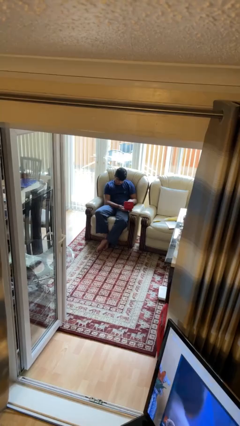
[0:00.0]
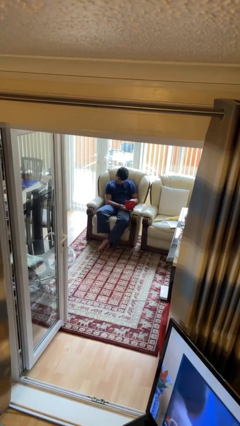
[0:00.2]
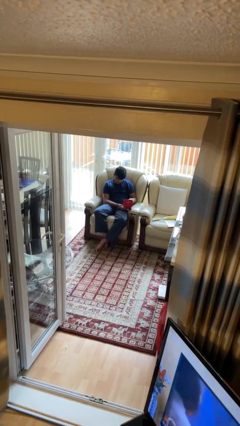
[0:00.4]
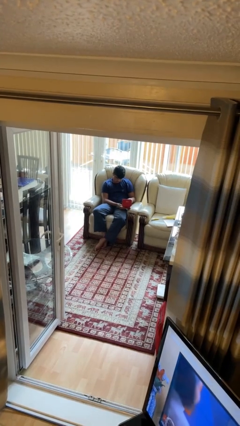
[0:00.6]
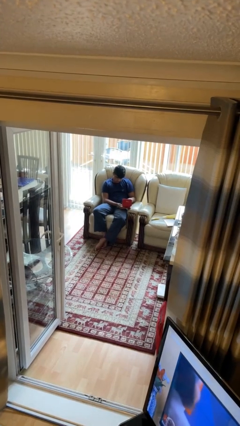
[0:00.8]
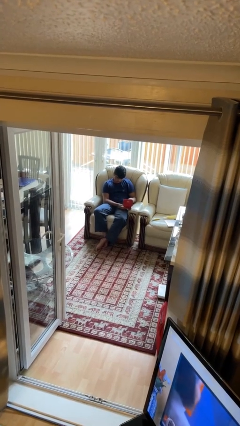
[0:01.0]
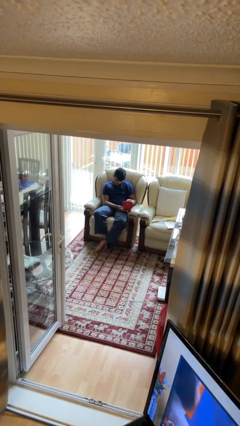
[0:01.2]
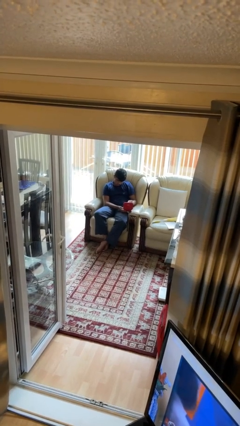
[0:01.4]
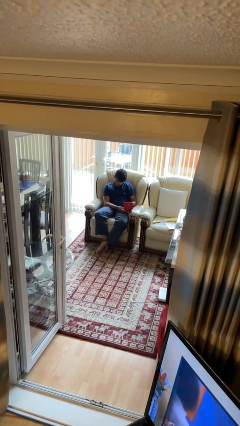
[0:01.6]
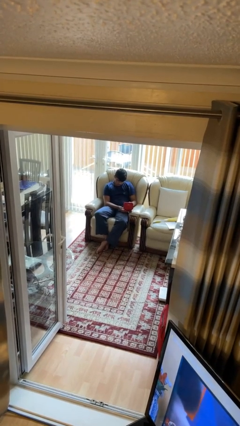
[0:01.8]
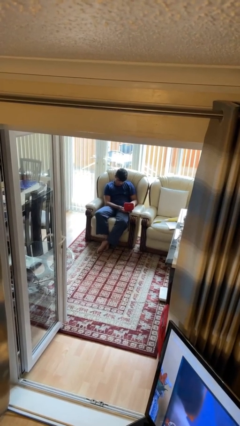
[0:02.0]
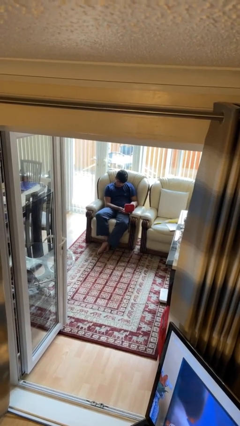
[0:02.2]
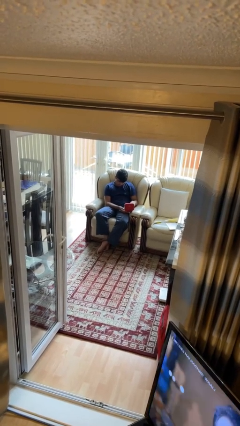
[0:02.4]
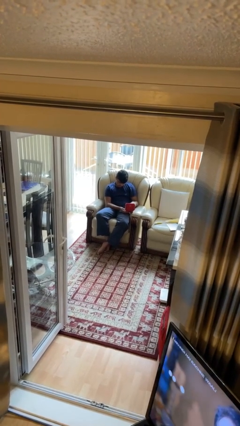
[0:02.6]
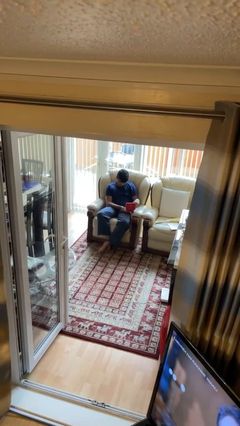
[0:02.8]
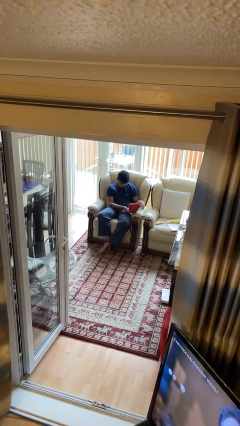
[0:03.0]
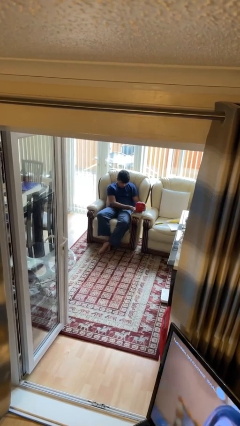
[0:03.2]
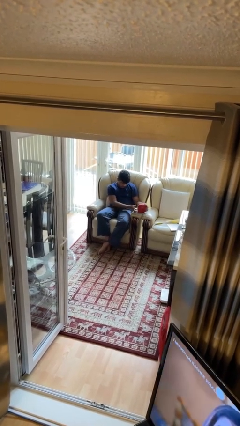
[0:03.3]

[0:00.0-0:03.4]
person searches jewelry box

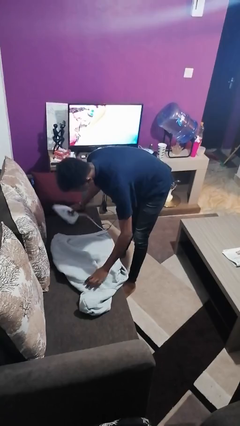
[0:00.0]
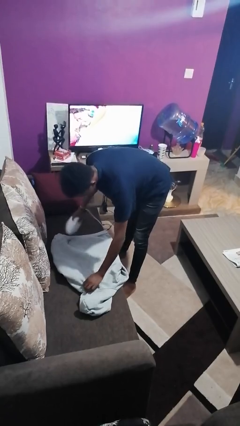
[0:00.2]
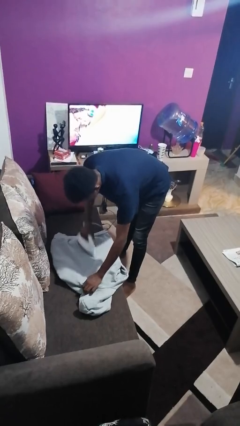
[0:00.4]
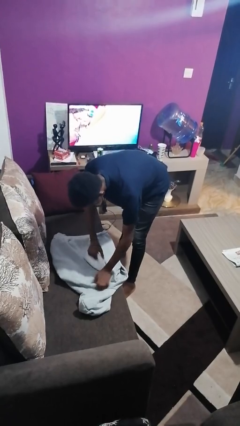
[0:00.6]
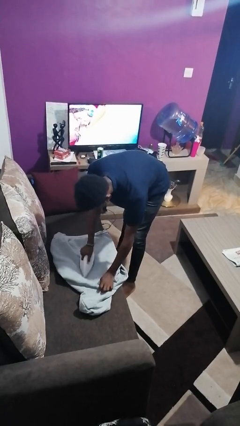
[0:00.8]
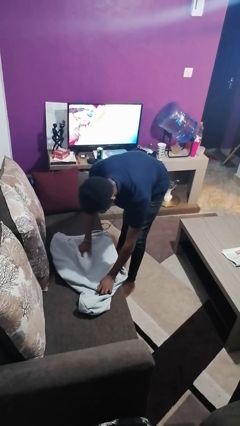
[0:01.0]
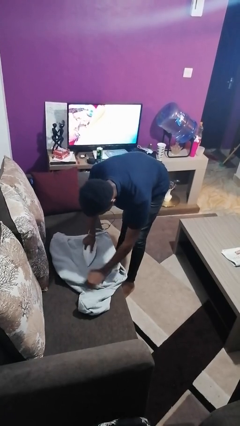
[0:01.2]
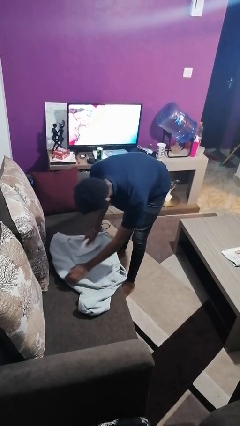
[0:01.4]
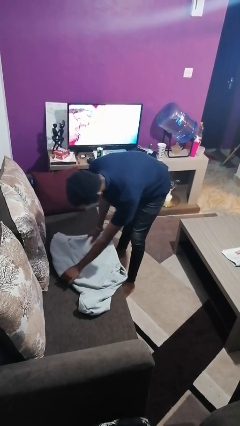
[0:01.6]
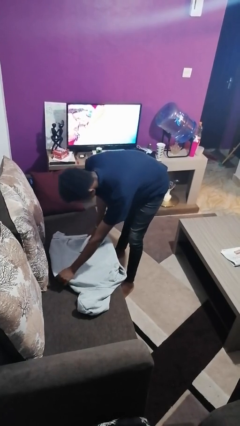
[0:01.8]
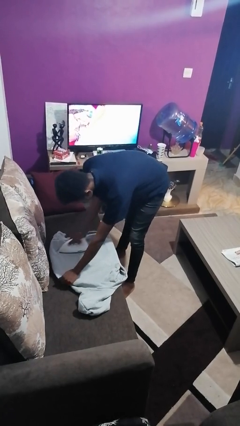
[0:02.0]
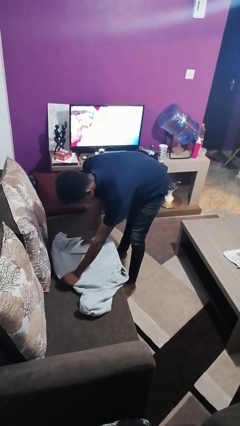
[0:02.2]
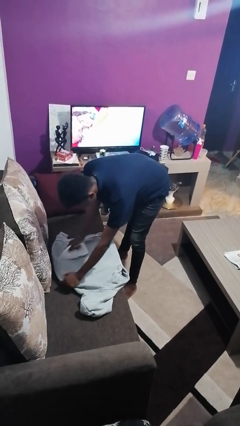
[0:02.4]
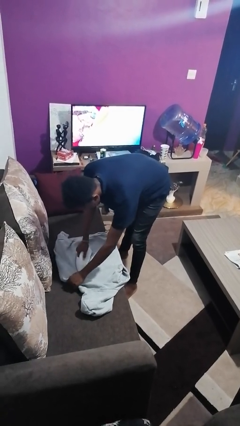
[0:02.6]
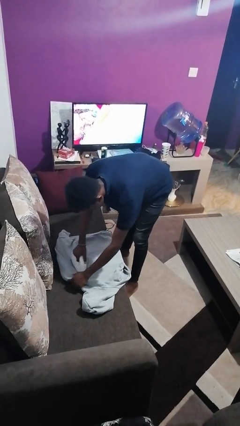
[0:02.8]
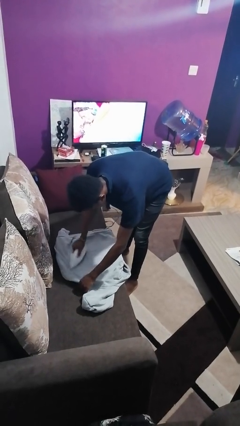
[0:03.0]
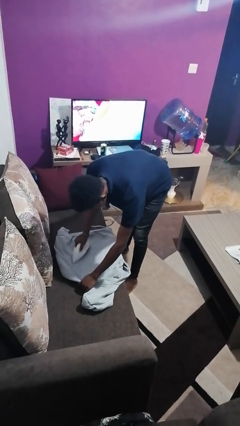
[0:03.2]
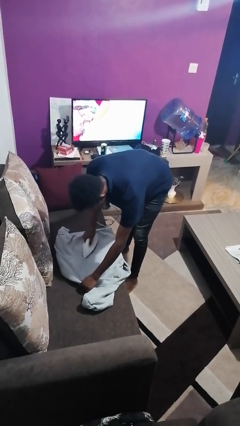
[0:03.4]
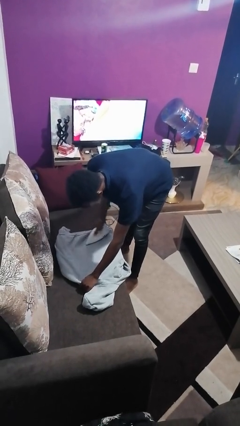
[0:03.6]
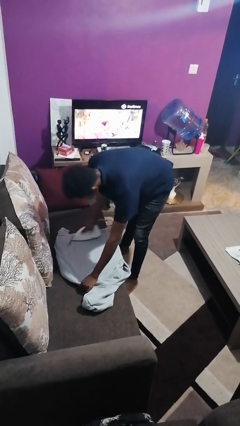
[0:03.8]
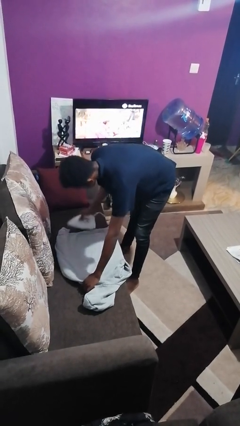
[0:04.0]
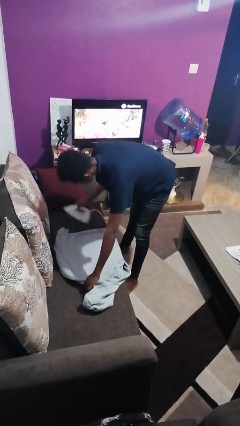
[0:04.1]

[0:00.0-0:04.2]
person irons clothes

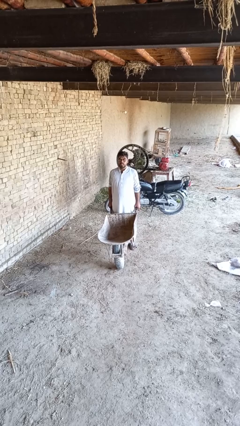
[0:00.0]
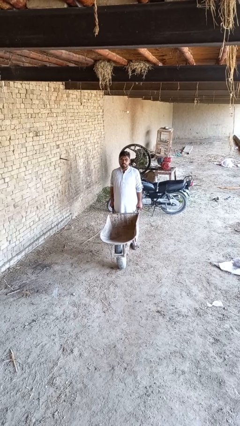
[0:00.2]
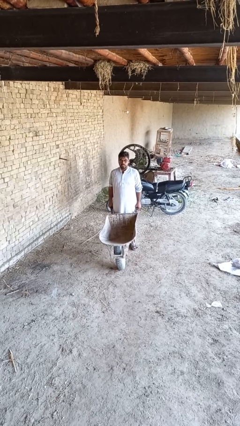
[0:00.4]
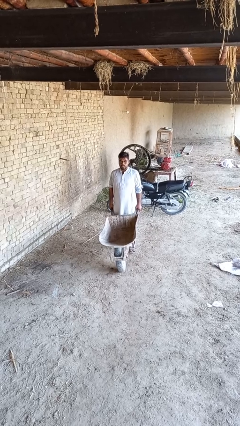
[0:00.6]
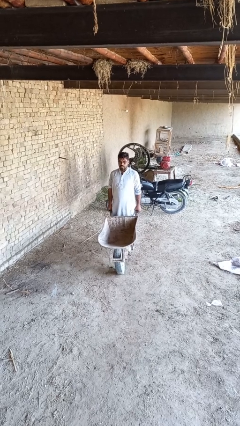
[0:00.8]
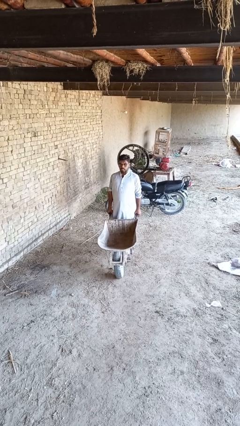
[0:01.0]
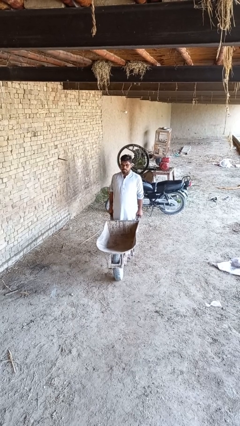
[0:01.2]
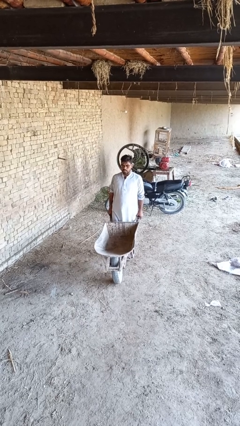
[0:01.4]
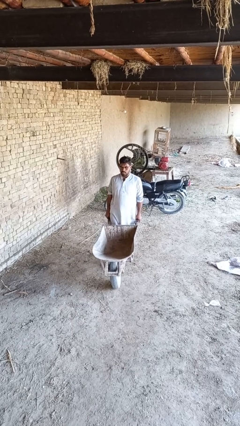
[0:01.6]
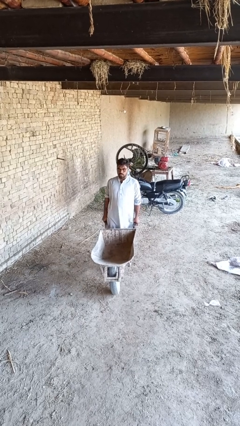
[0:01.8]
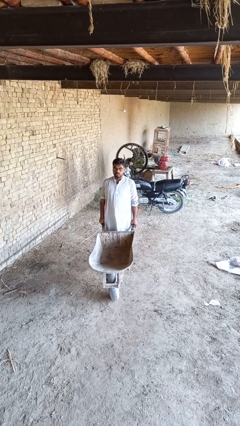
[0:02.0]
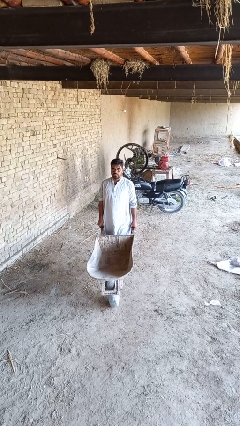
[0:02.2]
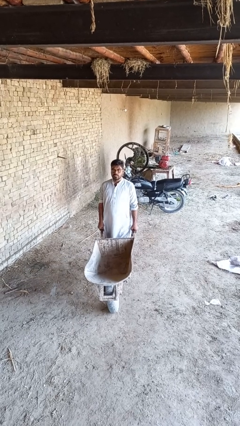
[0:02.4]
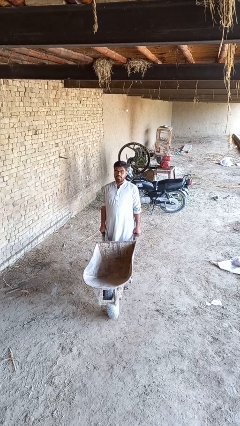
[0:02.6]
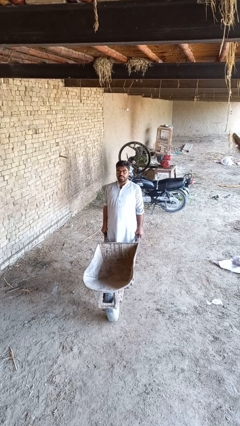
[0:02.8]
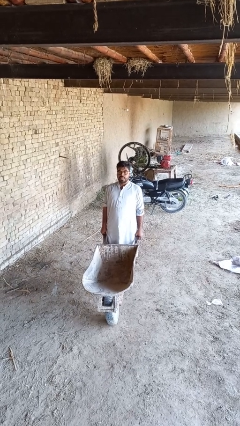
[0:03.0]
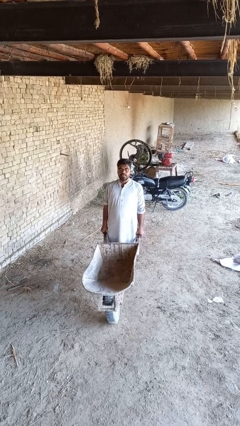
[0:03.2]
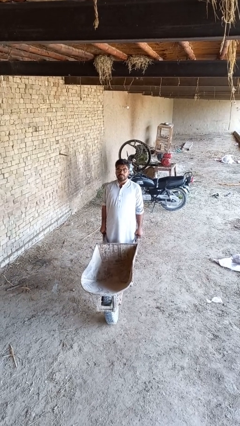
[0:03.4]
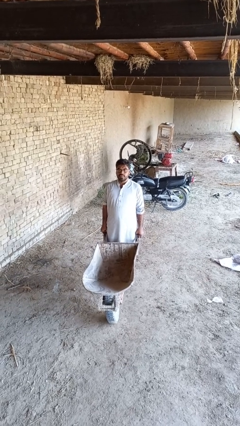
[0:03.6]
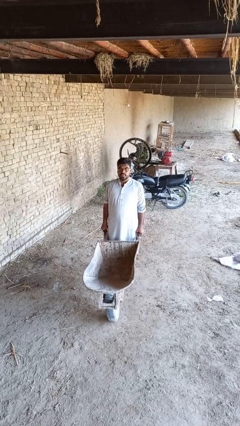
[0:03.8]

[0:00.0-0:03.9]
person pushes wheeled cart

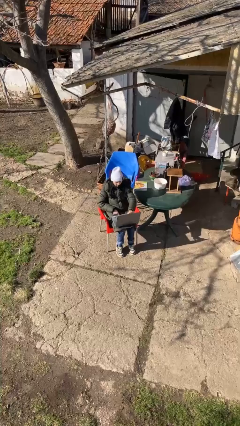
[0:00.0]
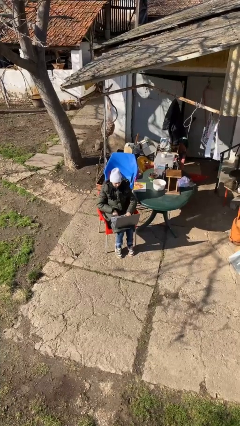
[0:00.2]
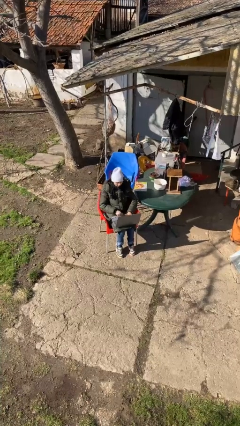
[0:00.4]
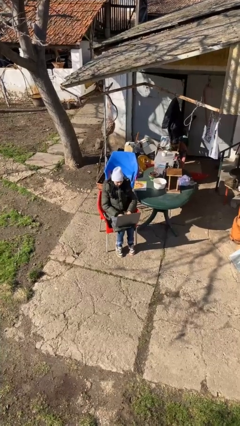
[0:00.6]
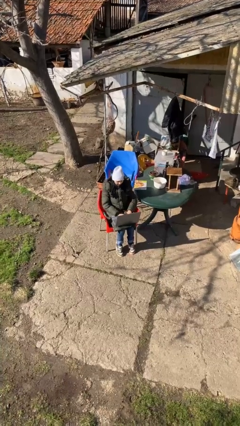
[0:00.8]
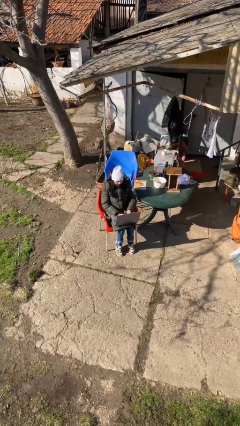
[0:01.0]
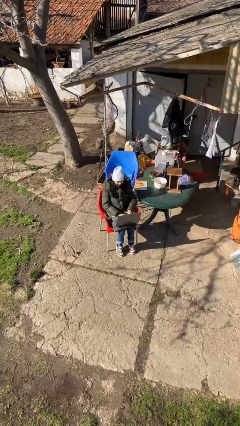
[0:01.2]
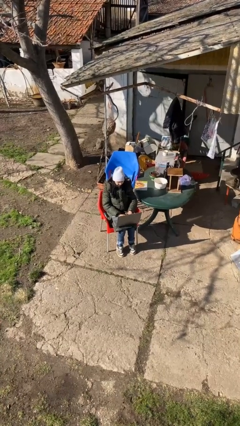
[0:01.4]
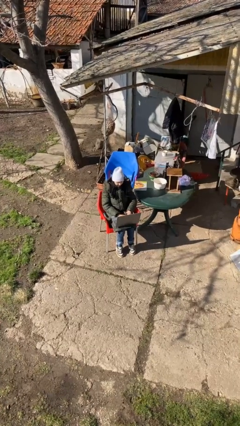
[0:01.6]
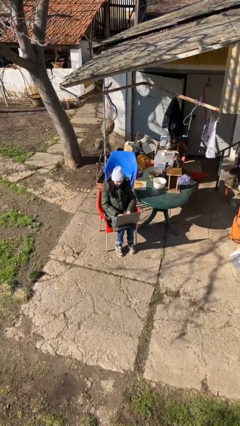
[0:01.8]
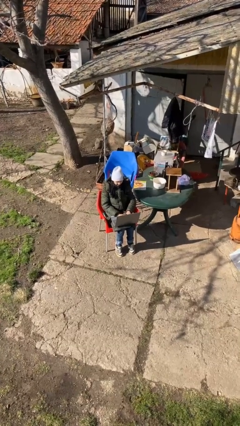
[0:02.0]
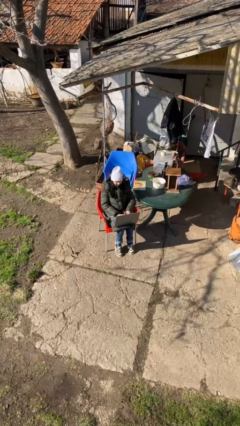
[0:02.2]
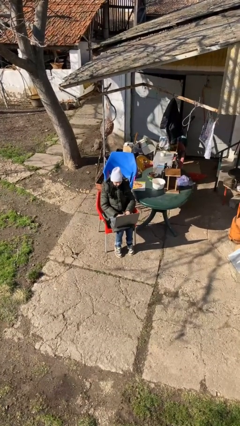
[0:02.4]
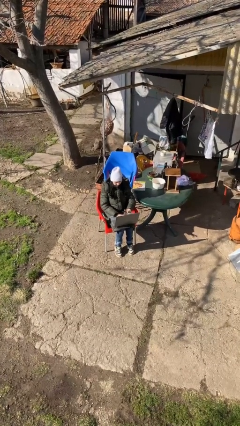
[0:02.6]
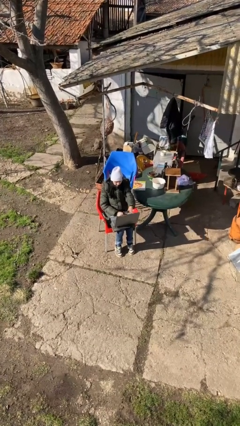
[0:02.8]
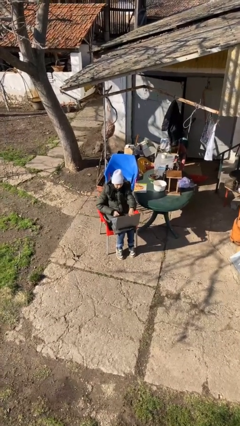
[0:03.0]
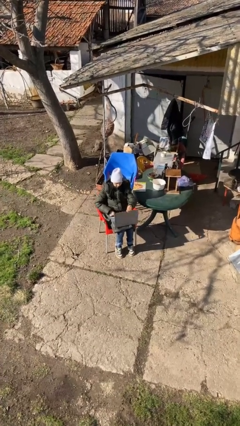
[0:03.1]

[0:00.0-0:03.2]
person interacts with laptop

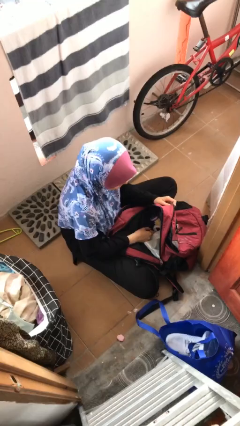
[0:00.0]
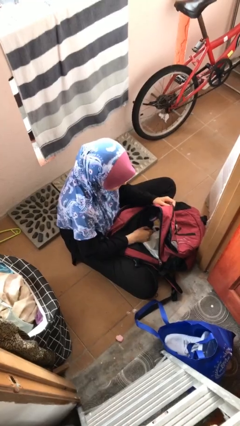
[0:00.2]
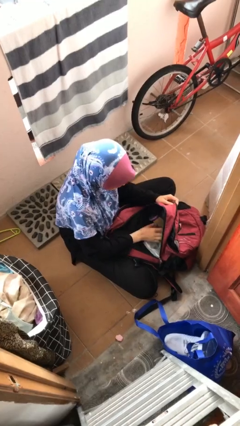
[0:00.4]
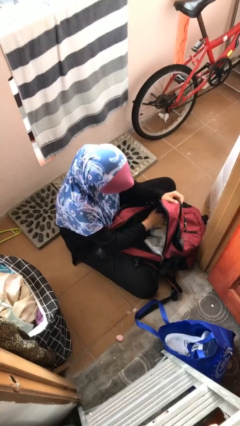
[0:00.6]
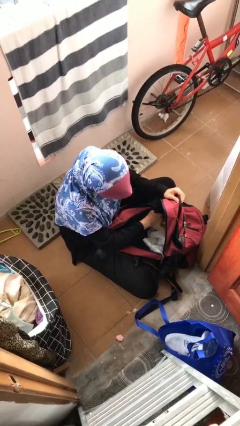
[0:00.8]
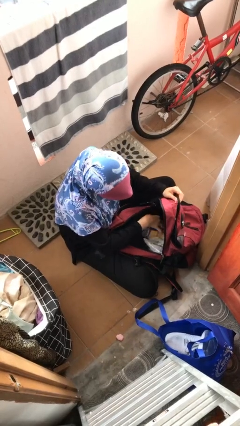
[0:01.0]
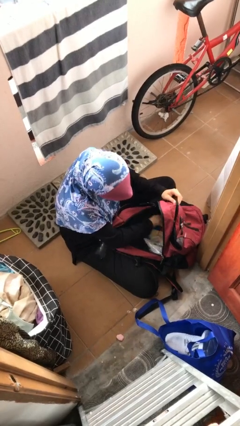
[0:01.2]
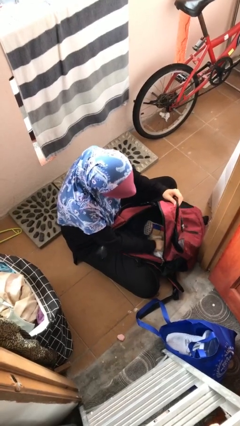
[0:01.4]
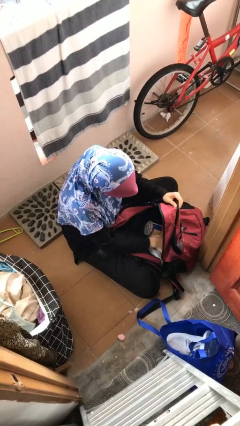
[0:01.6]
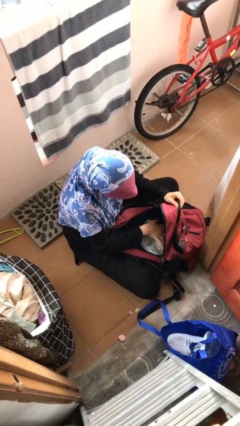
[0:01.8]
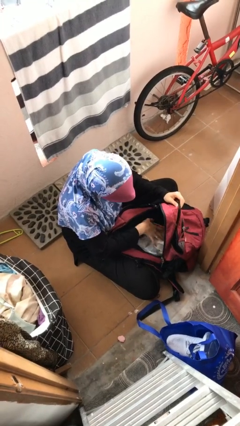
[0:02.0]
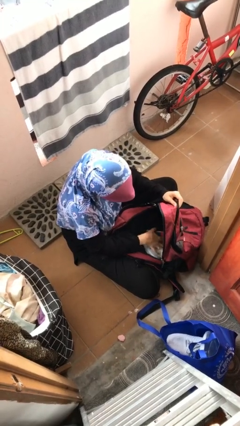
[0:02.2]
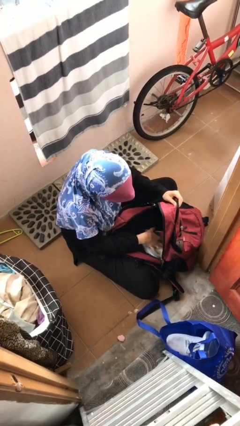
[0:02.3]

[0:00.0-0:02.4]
person searches in backpack

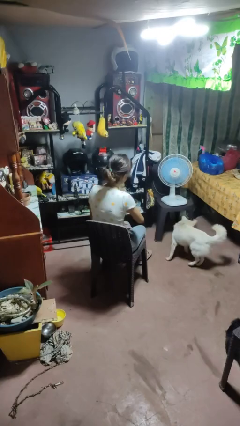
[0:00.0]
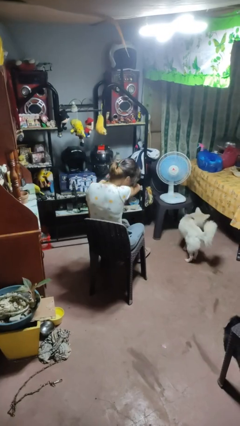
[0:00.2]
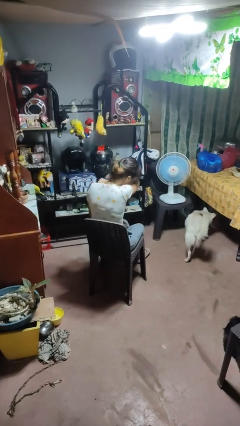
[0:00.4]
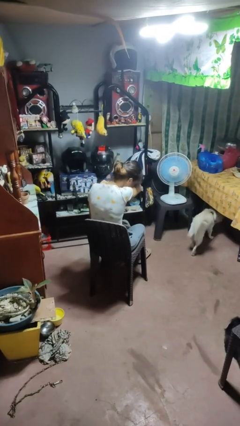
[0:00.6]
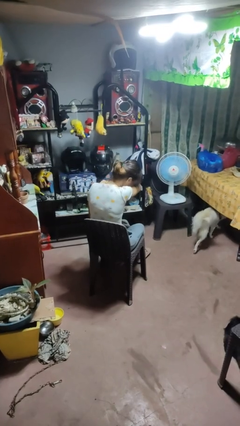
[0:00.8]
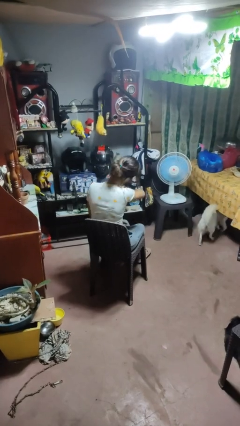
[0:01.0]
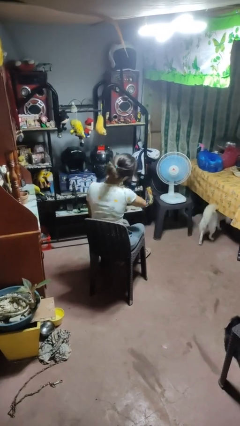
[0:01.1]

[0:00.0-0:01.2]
person sneezes into arm
